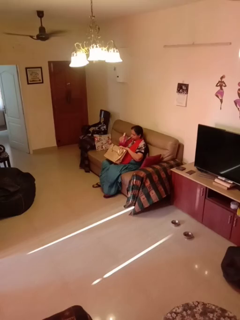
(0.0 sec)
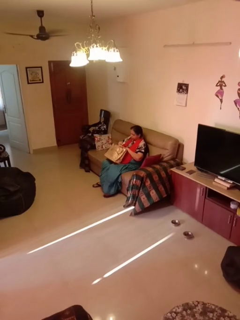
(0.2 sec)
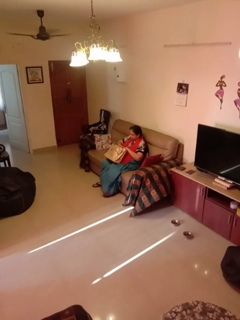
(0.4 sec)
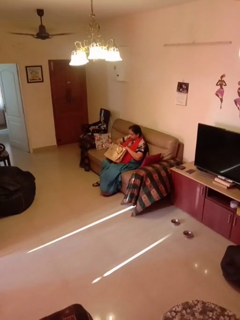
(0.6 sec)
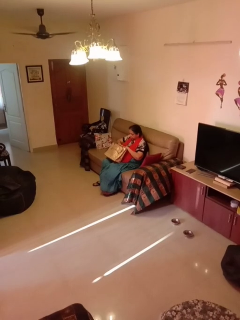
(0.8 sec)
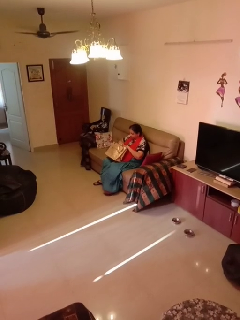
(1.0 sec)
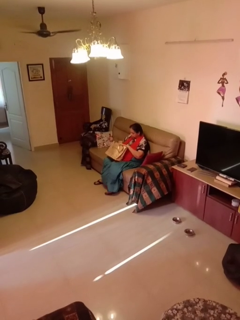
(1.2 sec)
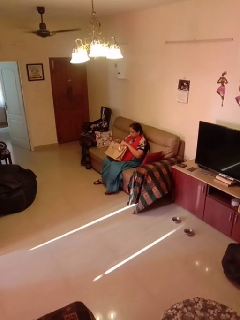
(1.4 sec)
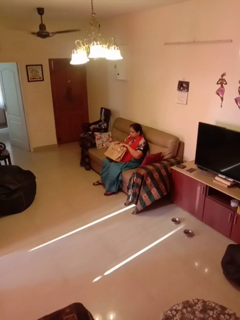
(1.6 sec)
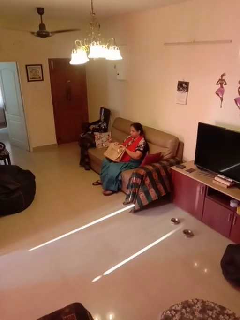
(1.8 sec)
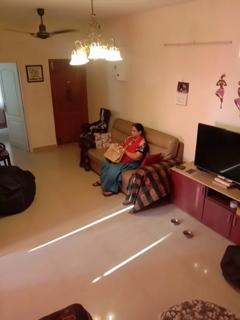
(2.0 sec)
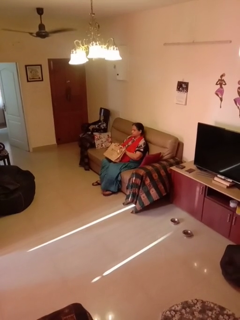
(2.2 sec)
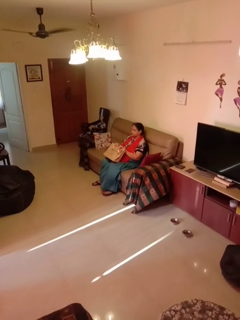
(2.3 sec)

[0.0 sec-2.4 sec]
person puts object into purse

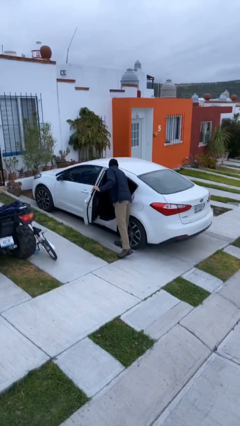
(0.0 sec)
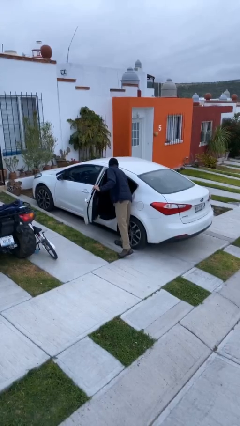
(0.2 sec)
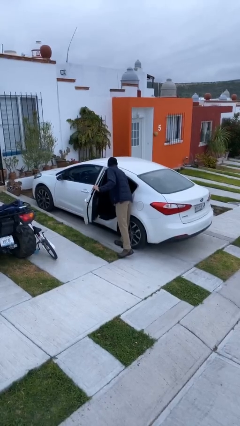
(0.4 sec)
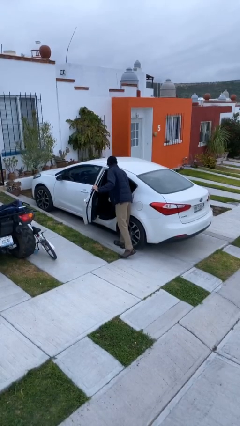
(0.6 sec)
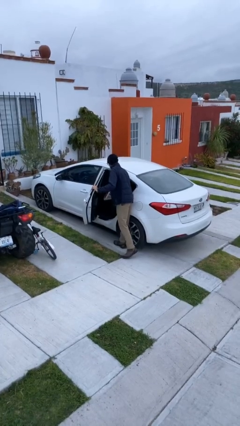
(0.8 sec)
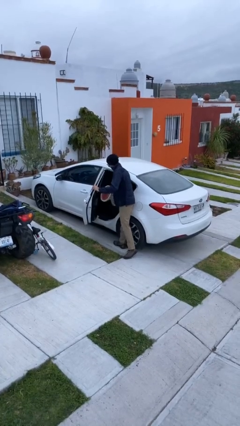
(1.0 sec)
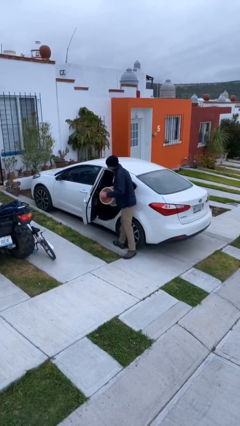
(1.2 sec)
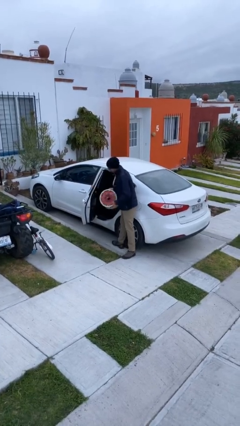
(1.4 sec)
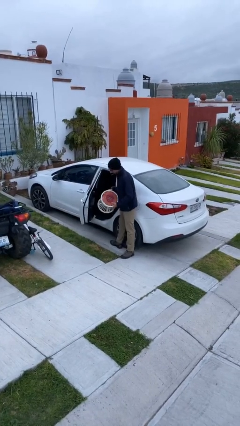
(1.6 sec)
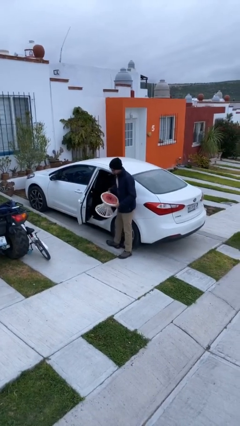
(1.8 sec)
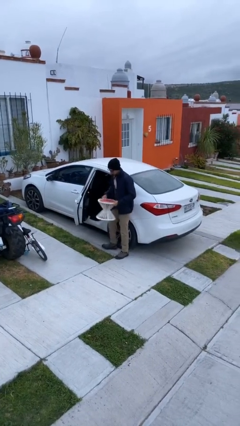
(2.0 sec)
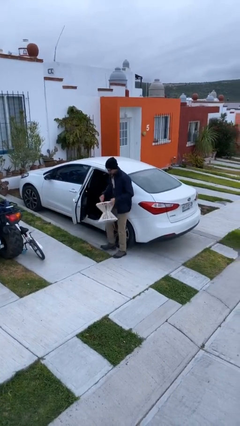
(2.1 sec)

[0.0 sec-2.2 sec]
person unloads car

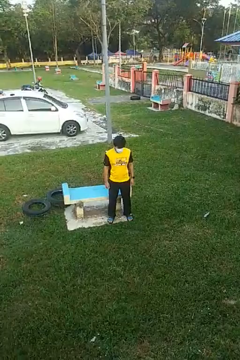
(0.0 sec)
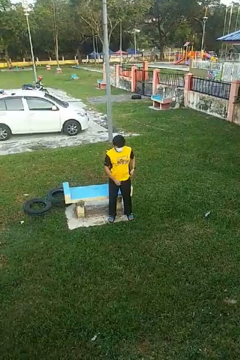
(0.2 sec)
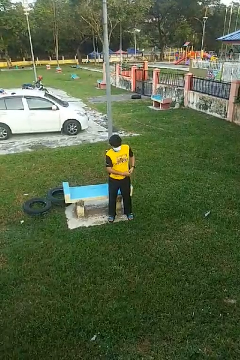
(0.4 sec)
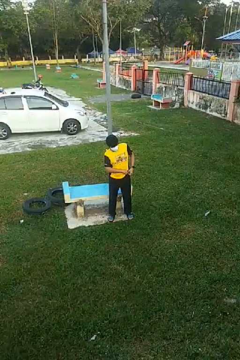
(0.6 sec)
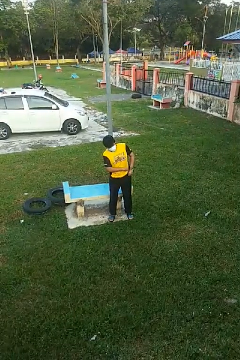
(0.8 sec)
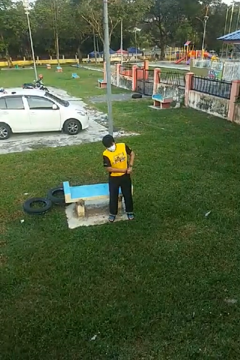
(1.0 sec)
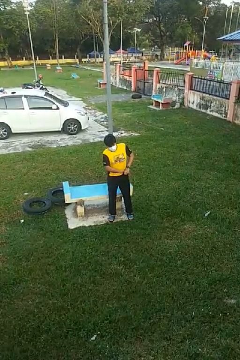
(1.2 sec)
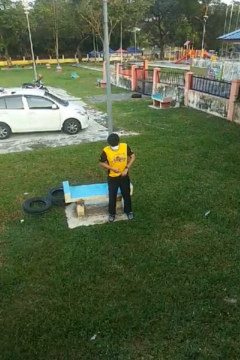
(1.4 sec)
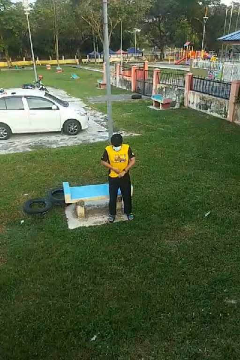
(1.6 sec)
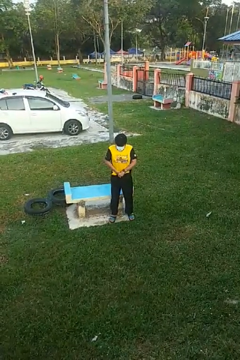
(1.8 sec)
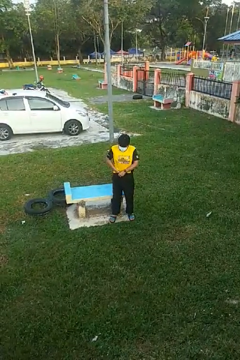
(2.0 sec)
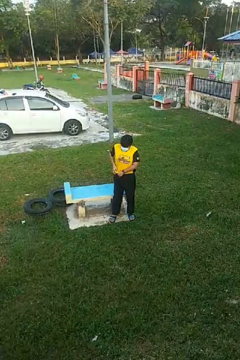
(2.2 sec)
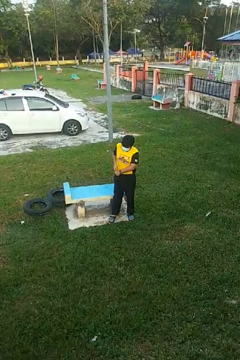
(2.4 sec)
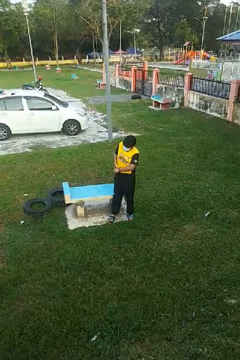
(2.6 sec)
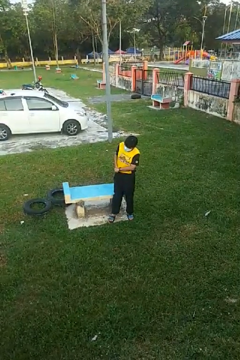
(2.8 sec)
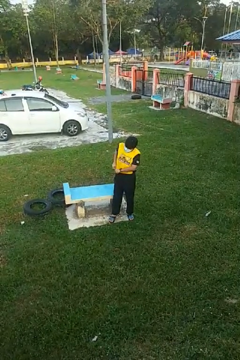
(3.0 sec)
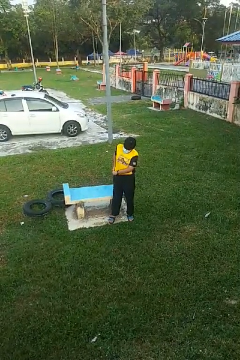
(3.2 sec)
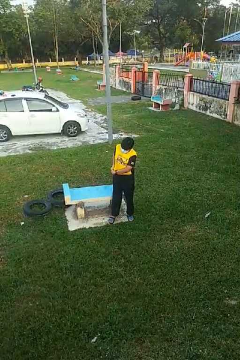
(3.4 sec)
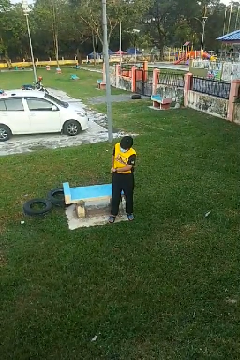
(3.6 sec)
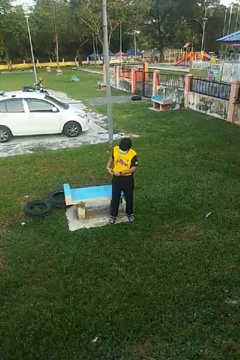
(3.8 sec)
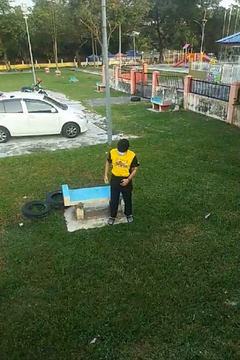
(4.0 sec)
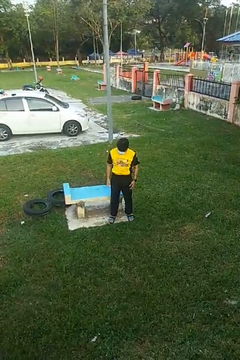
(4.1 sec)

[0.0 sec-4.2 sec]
person tucks in shirt

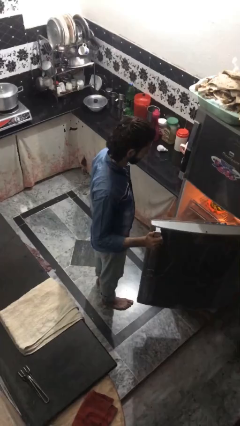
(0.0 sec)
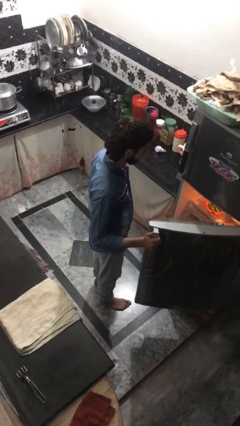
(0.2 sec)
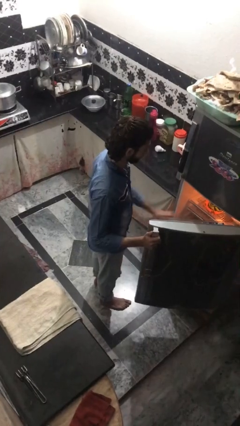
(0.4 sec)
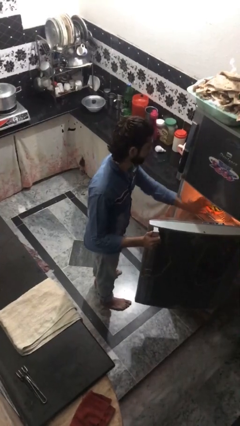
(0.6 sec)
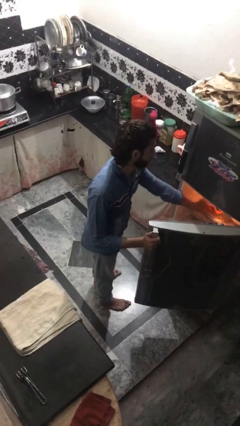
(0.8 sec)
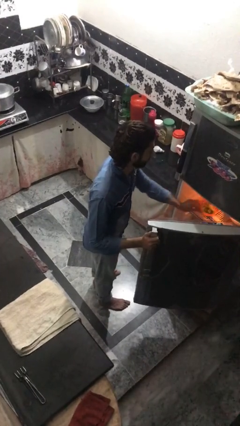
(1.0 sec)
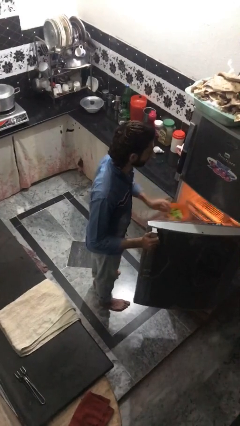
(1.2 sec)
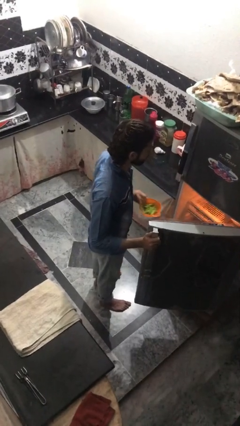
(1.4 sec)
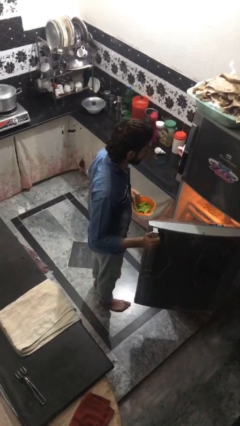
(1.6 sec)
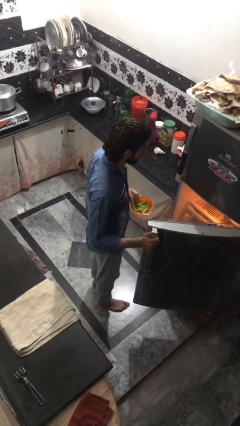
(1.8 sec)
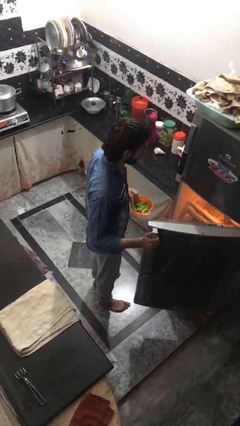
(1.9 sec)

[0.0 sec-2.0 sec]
person takes object from refrigerator

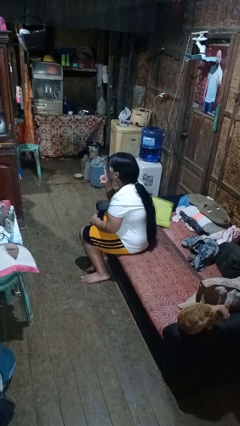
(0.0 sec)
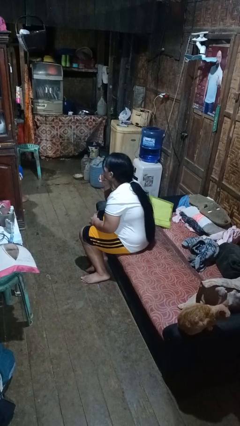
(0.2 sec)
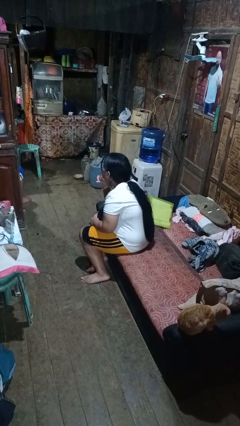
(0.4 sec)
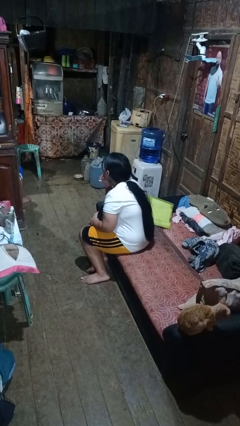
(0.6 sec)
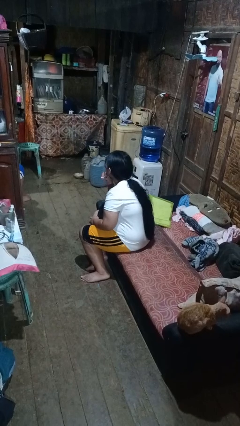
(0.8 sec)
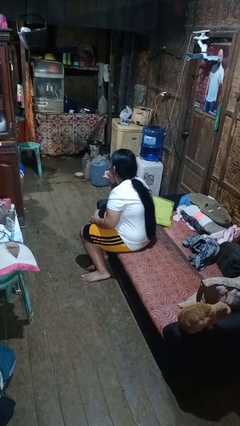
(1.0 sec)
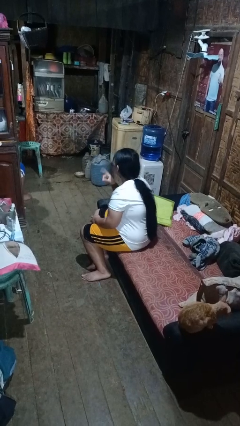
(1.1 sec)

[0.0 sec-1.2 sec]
person gestures be quiet

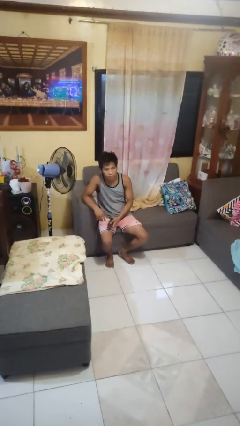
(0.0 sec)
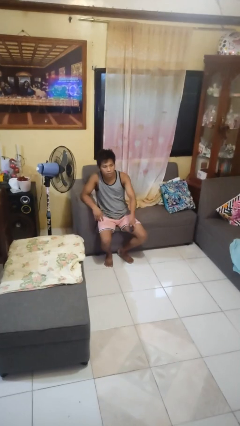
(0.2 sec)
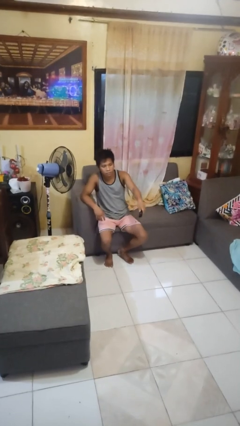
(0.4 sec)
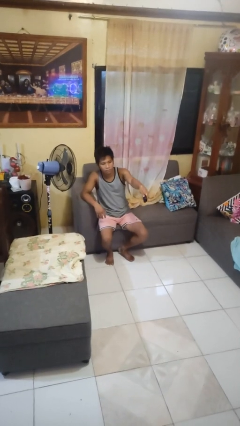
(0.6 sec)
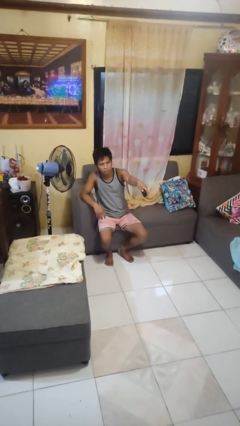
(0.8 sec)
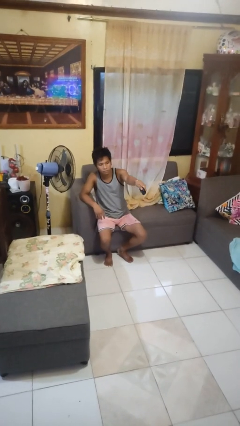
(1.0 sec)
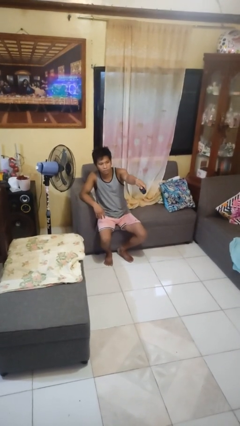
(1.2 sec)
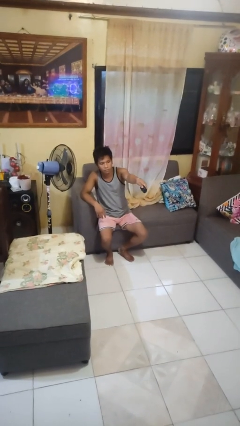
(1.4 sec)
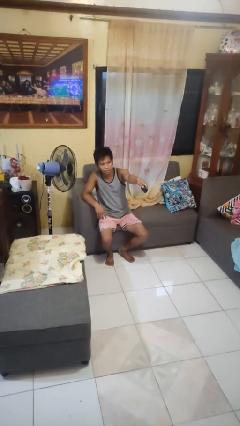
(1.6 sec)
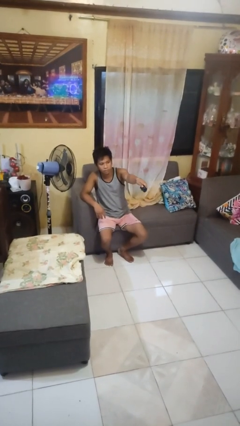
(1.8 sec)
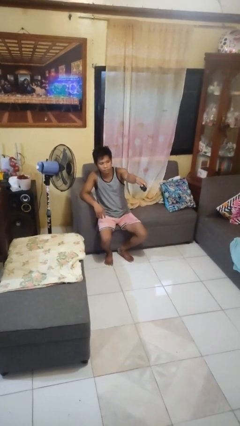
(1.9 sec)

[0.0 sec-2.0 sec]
person uses television remote

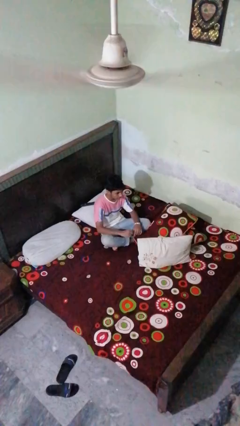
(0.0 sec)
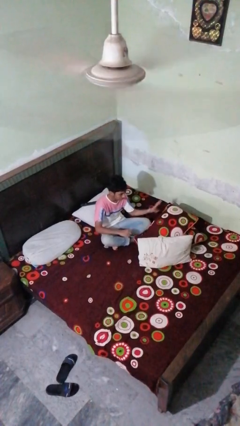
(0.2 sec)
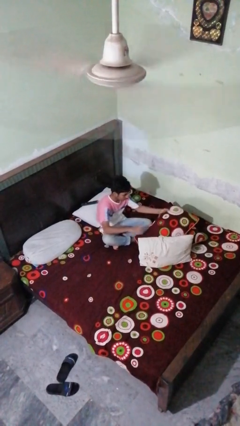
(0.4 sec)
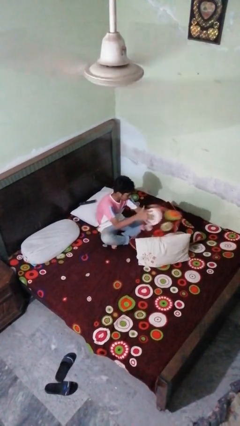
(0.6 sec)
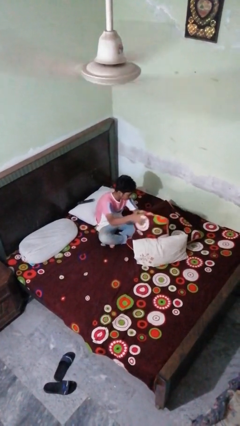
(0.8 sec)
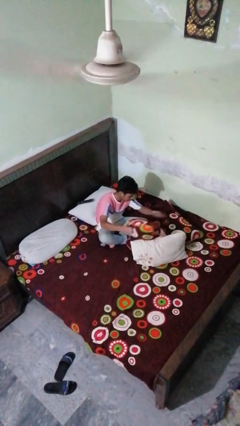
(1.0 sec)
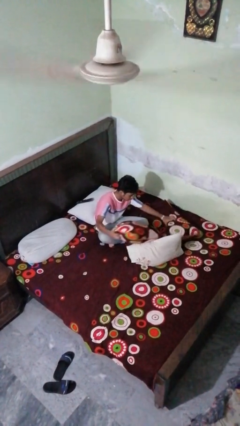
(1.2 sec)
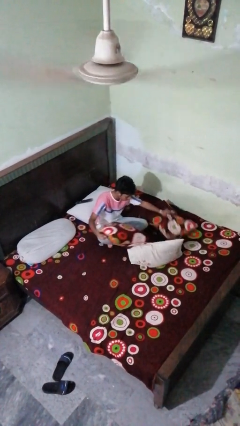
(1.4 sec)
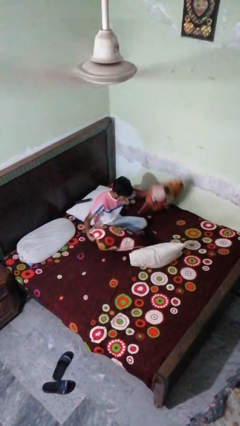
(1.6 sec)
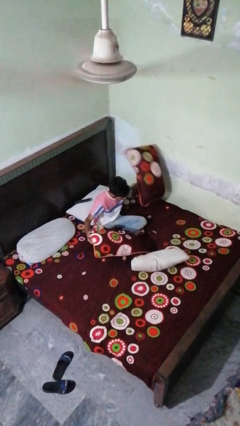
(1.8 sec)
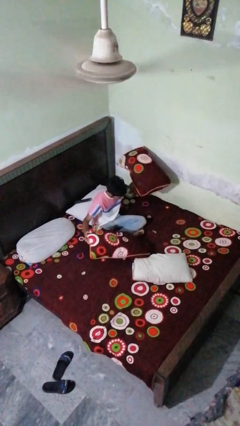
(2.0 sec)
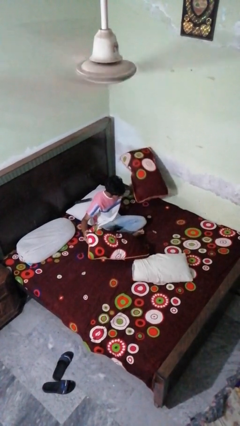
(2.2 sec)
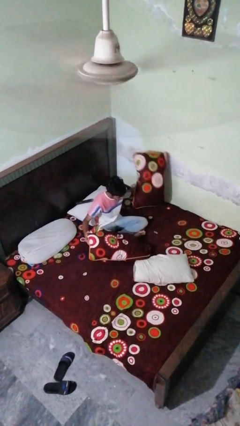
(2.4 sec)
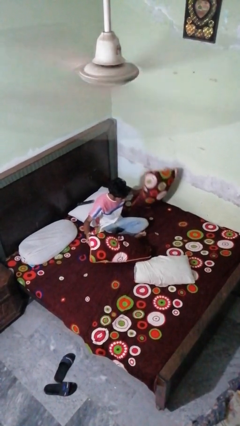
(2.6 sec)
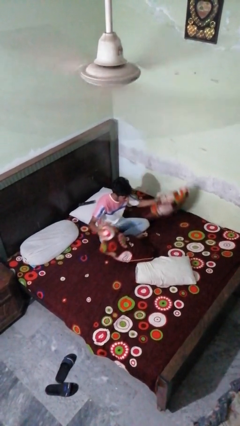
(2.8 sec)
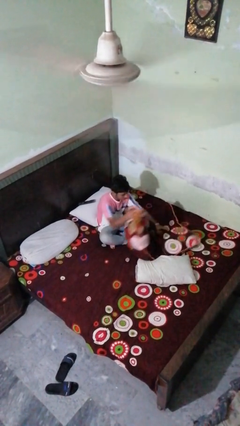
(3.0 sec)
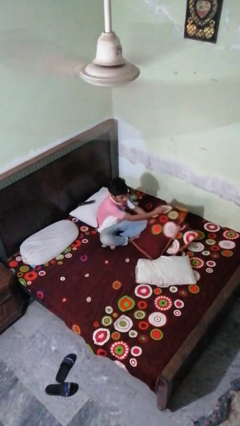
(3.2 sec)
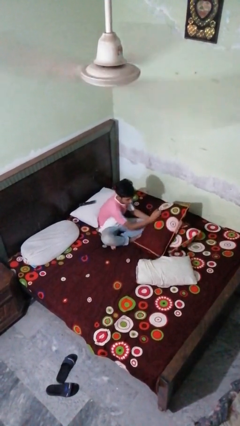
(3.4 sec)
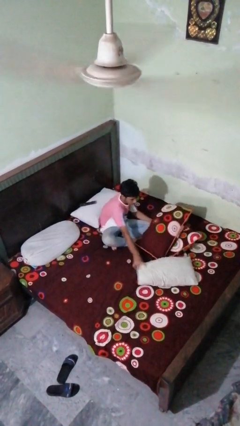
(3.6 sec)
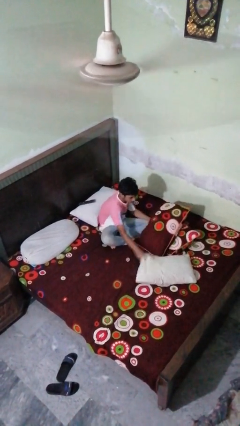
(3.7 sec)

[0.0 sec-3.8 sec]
person searches under bed

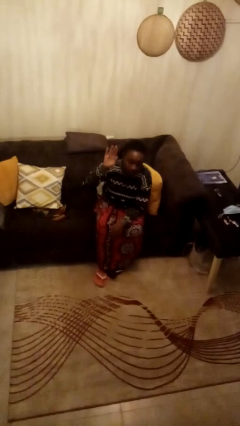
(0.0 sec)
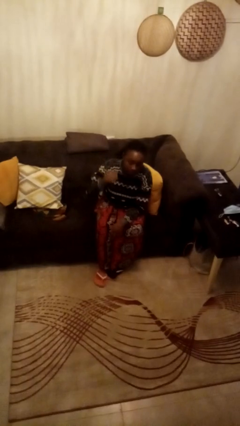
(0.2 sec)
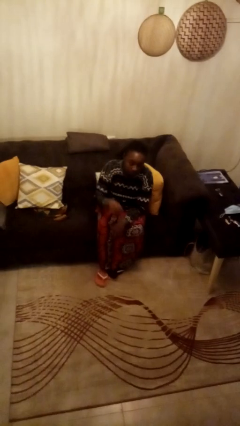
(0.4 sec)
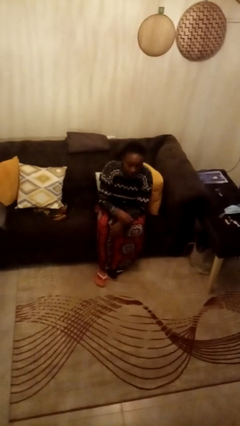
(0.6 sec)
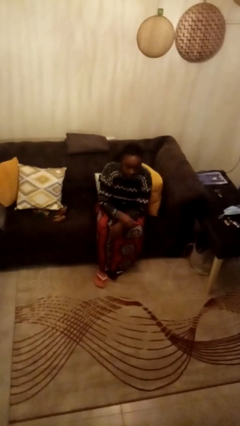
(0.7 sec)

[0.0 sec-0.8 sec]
person gestures lower hand
